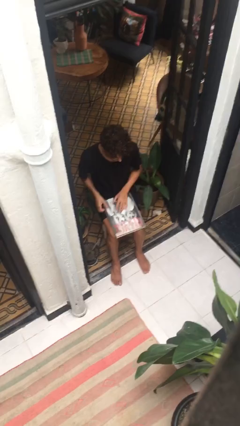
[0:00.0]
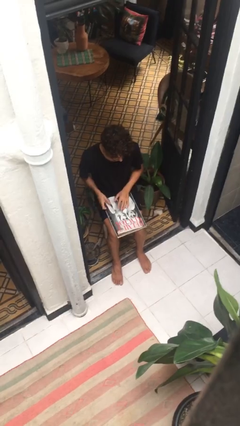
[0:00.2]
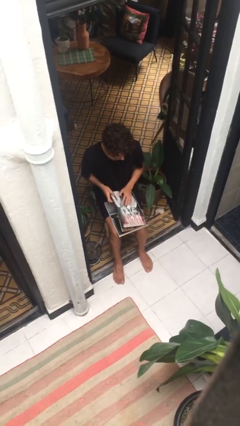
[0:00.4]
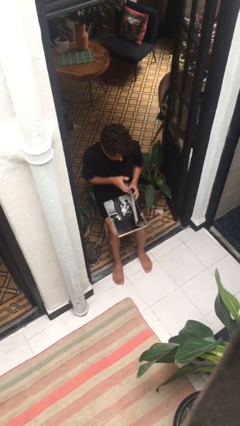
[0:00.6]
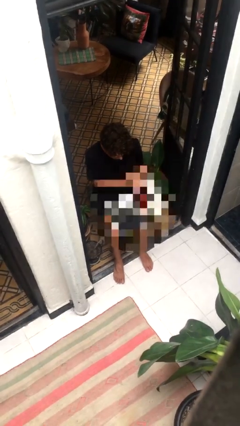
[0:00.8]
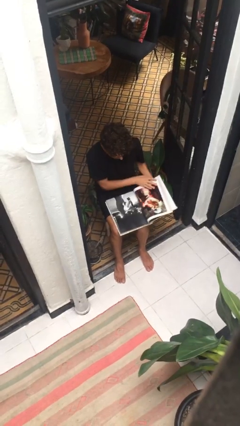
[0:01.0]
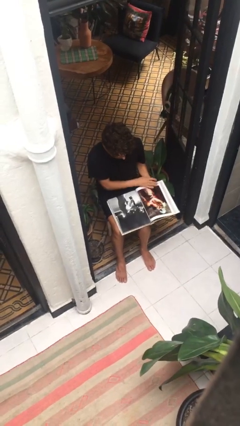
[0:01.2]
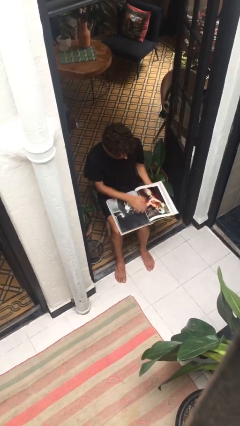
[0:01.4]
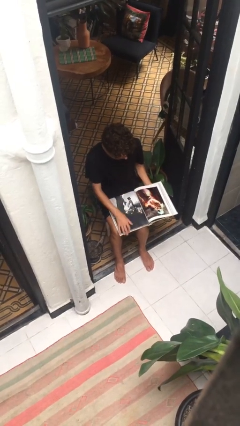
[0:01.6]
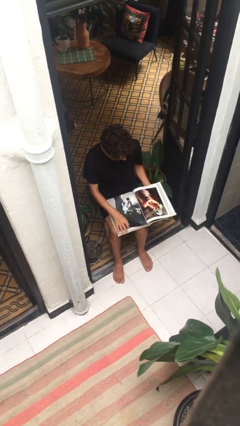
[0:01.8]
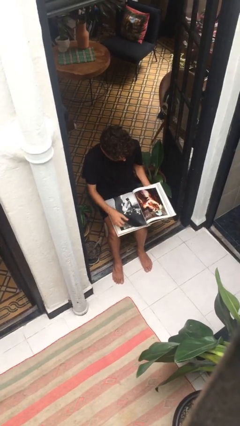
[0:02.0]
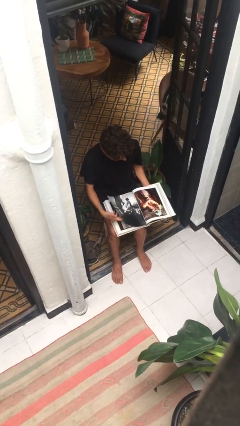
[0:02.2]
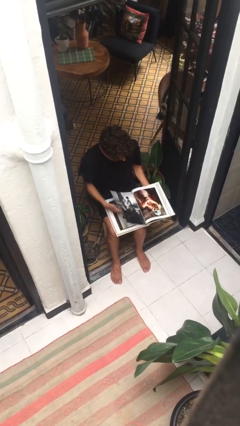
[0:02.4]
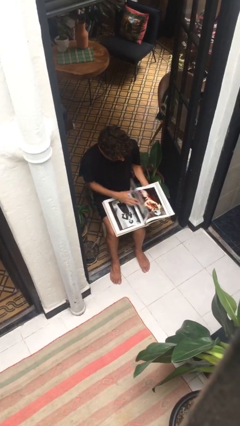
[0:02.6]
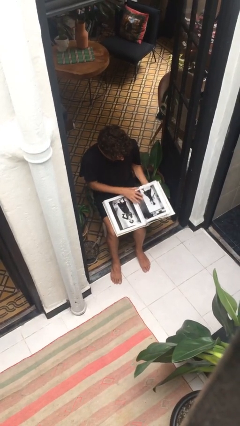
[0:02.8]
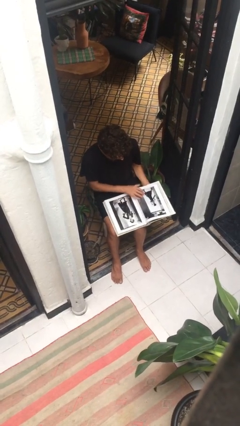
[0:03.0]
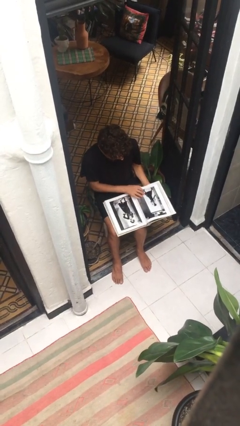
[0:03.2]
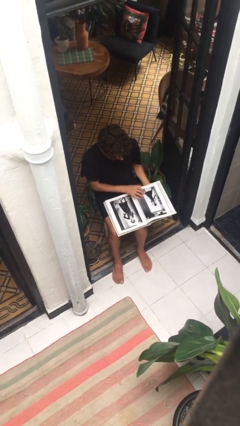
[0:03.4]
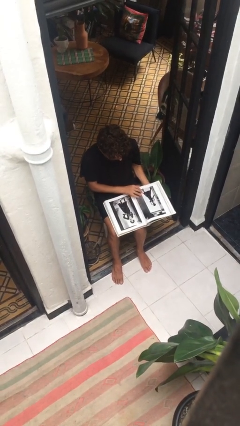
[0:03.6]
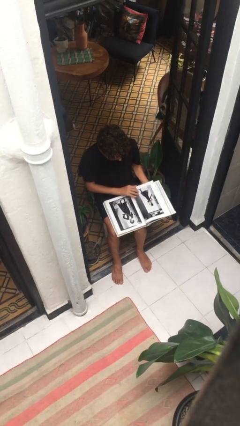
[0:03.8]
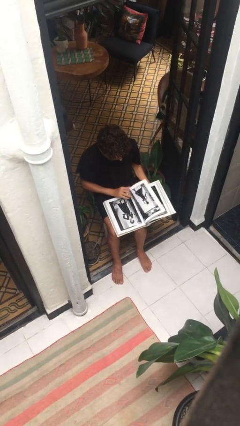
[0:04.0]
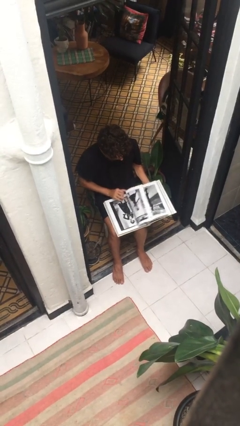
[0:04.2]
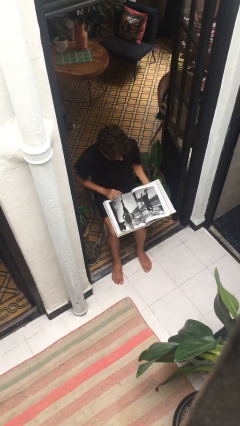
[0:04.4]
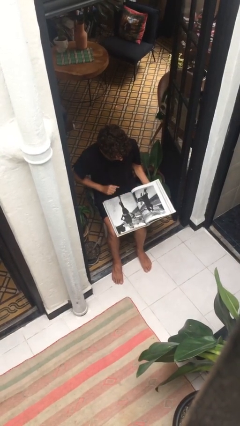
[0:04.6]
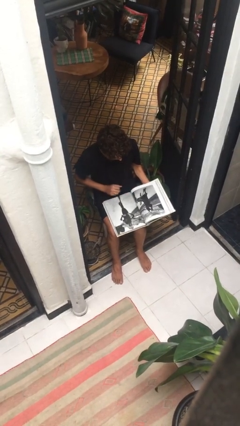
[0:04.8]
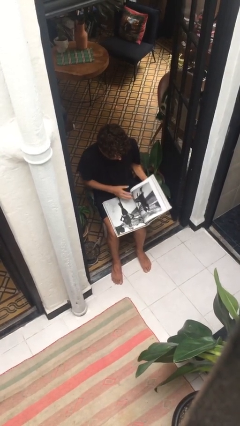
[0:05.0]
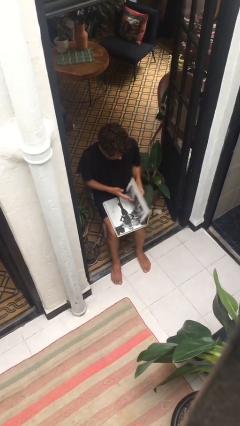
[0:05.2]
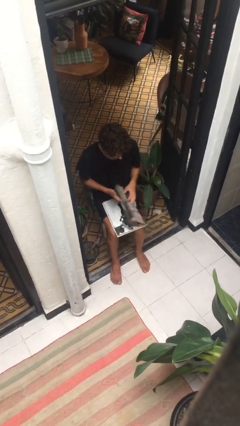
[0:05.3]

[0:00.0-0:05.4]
person reads document

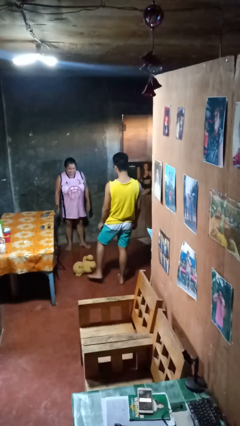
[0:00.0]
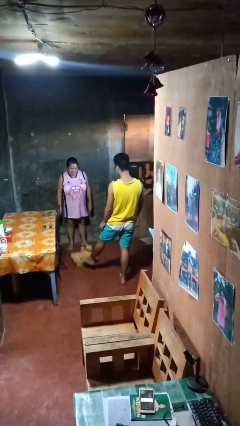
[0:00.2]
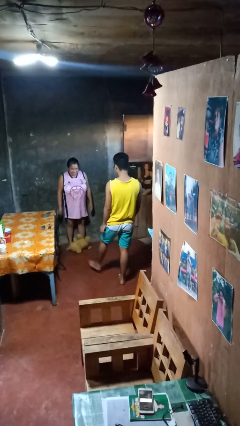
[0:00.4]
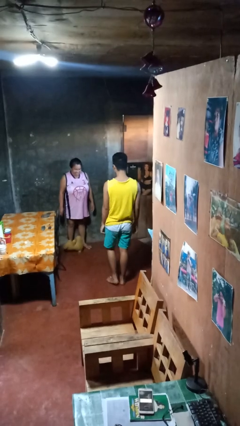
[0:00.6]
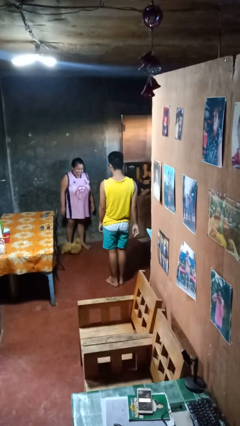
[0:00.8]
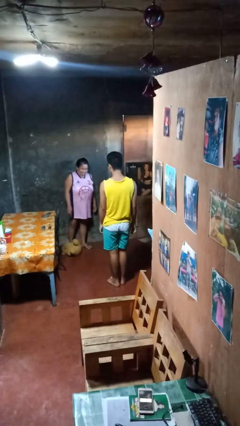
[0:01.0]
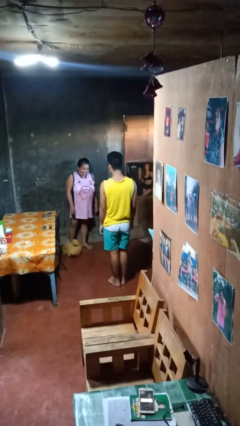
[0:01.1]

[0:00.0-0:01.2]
person kicks object to person

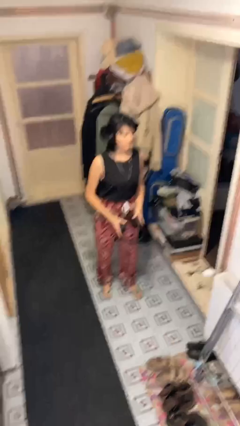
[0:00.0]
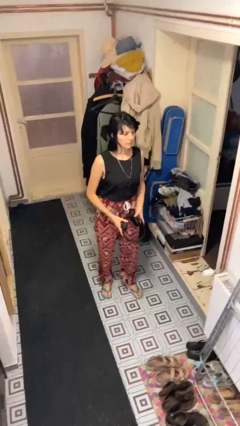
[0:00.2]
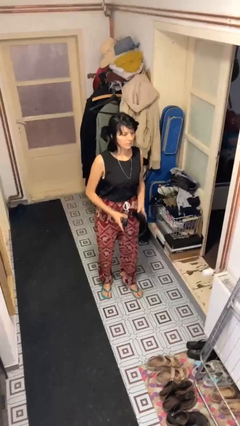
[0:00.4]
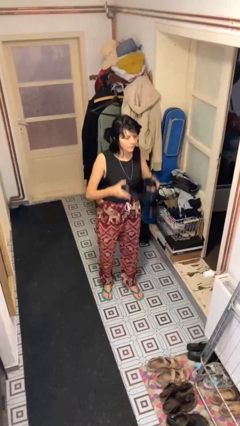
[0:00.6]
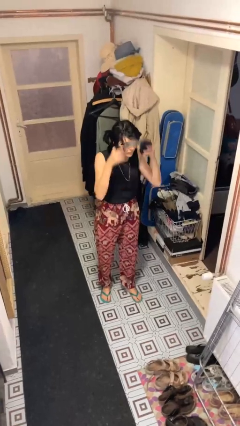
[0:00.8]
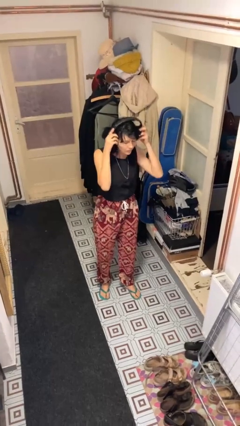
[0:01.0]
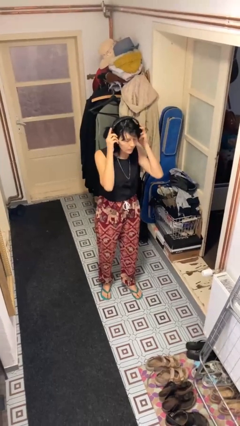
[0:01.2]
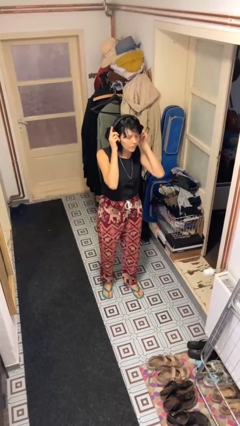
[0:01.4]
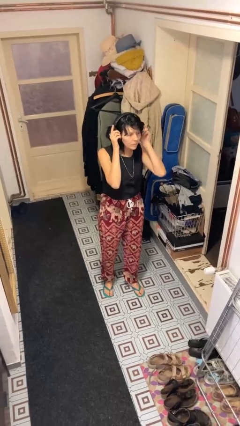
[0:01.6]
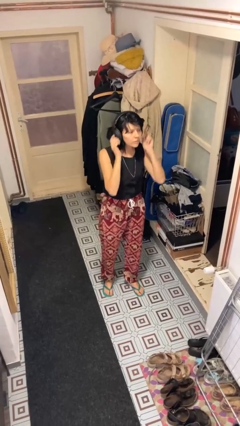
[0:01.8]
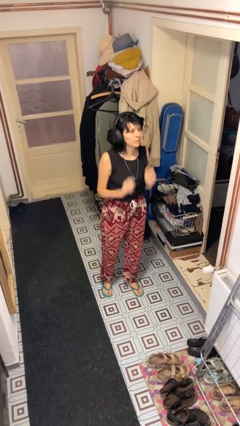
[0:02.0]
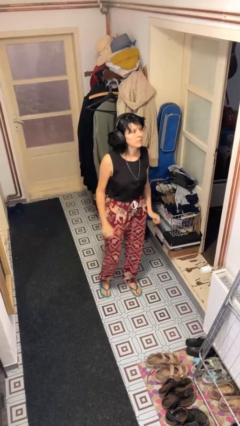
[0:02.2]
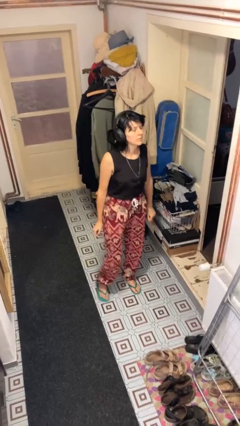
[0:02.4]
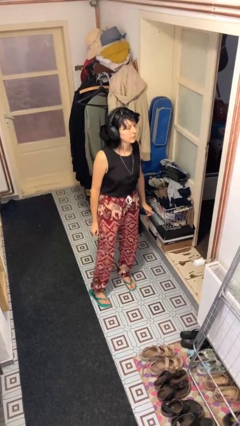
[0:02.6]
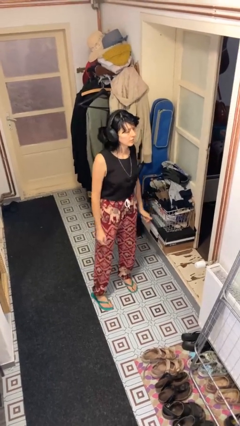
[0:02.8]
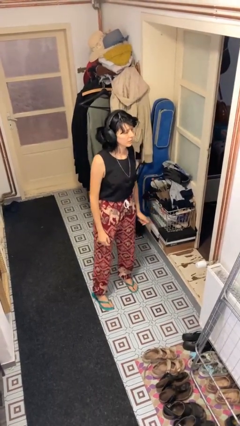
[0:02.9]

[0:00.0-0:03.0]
person puts on headphones

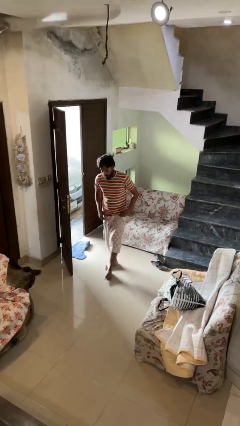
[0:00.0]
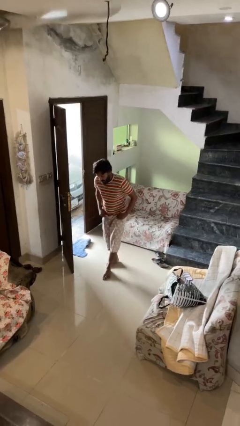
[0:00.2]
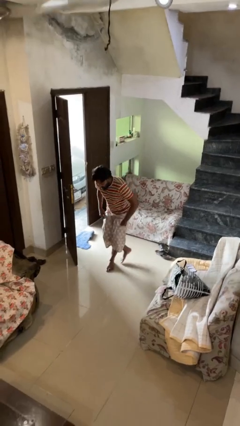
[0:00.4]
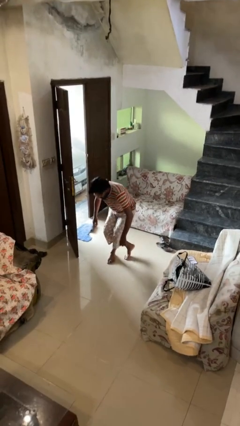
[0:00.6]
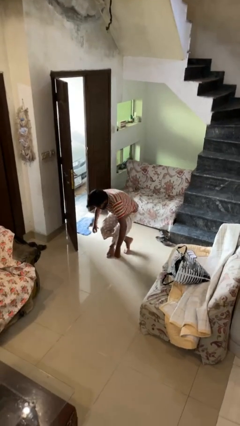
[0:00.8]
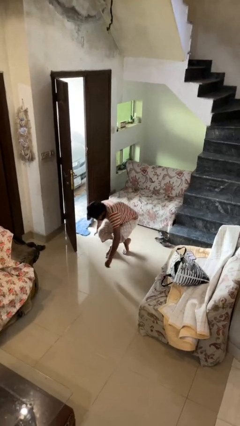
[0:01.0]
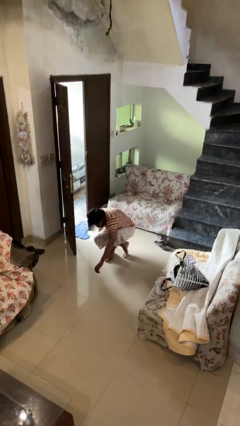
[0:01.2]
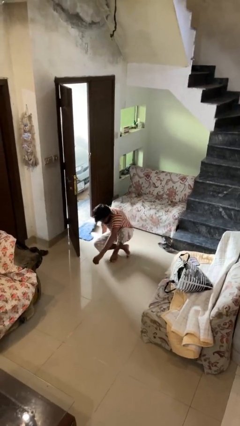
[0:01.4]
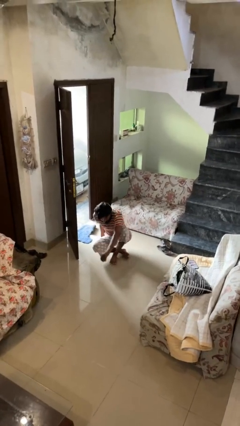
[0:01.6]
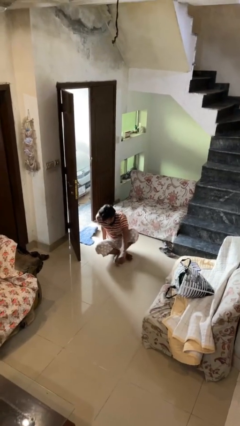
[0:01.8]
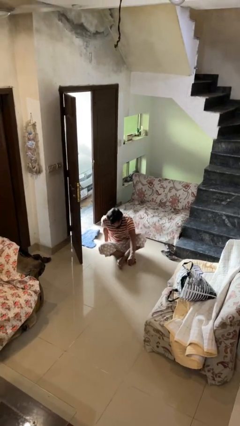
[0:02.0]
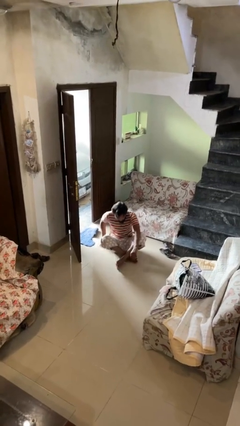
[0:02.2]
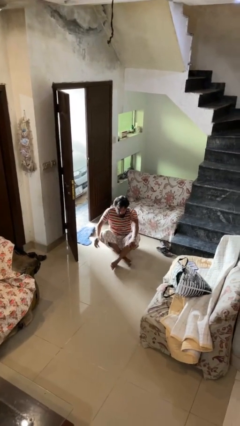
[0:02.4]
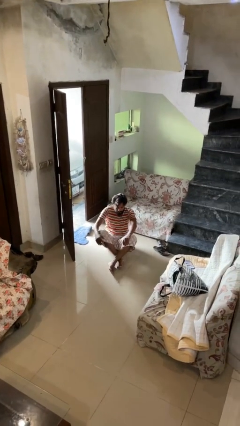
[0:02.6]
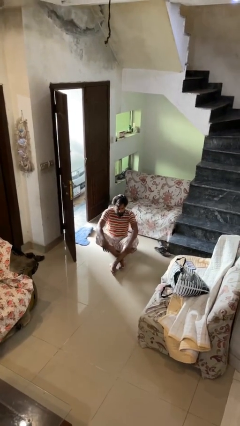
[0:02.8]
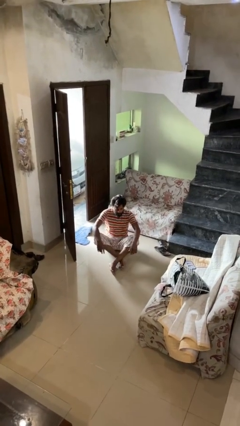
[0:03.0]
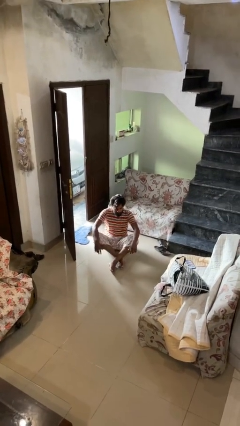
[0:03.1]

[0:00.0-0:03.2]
person sits crisscross

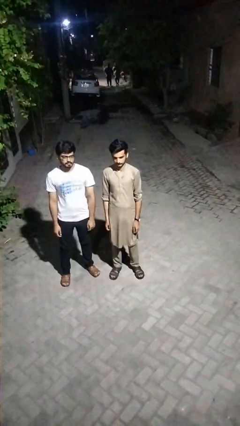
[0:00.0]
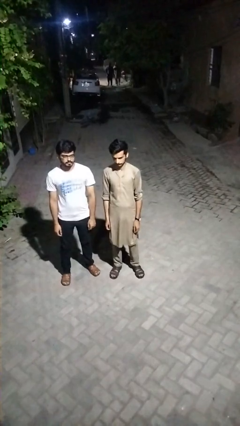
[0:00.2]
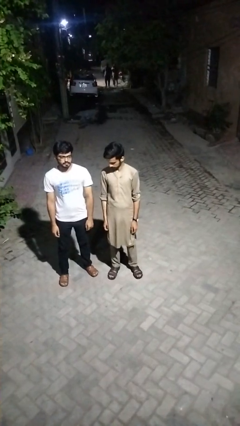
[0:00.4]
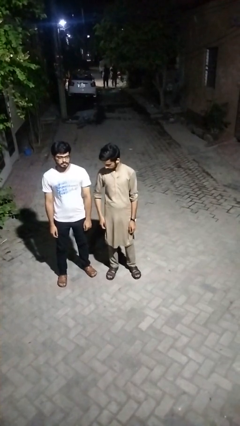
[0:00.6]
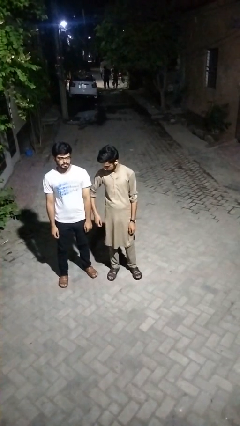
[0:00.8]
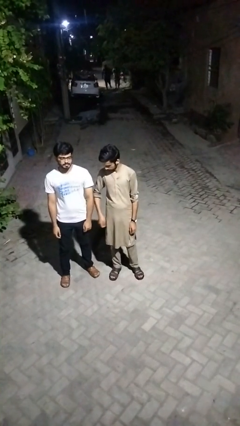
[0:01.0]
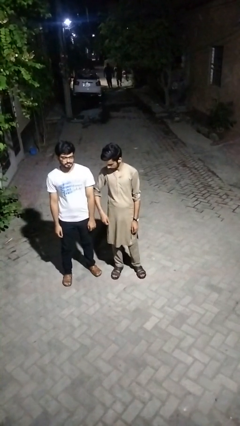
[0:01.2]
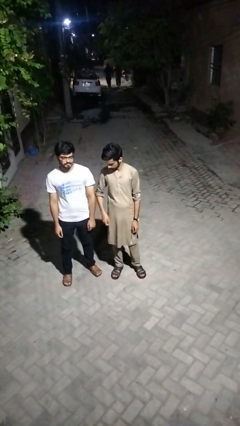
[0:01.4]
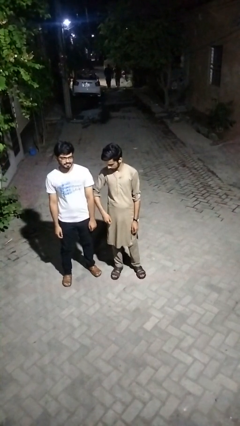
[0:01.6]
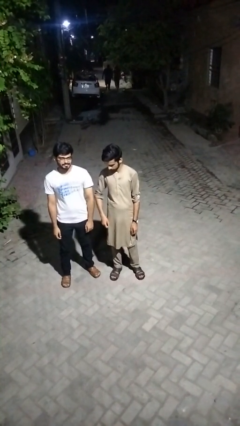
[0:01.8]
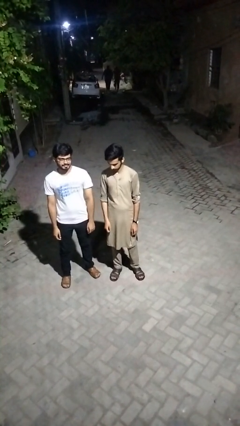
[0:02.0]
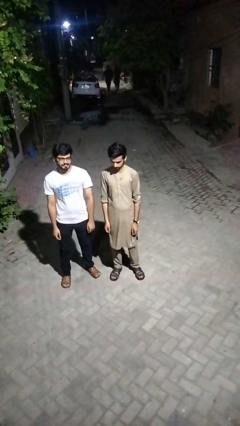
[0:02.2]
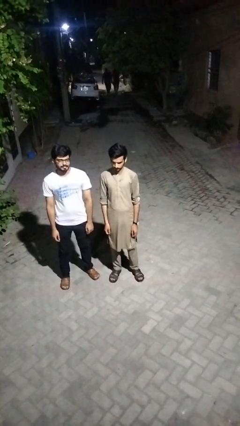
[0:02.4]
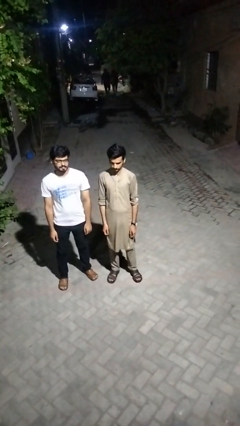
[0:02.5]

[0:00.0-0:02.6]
person nudges person with elbow

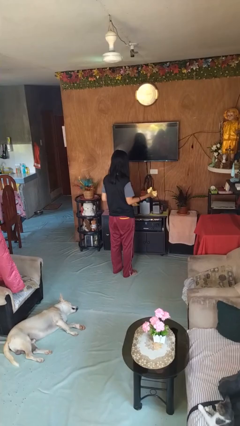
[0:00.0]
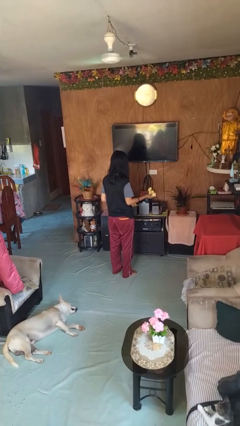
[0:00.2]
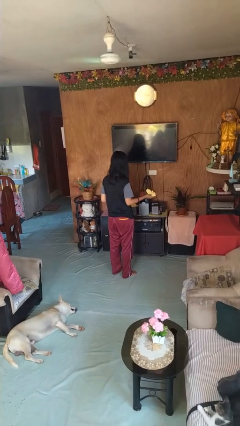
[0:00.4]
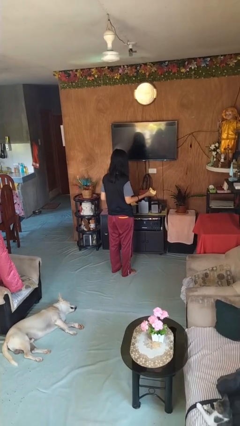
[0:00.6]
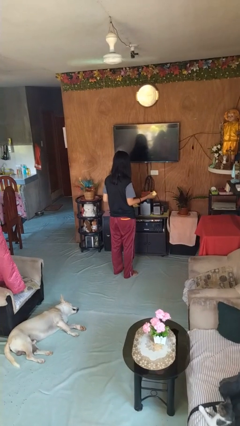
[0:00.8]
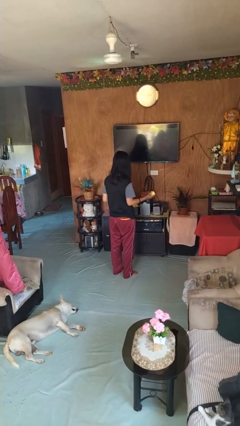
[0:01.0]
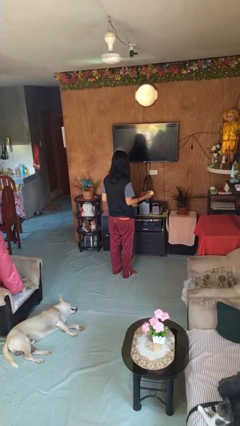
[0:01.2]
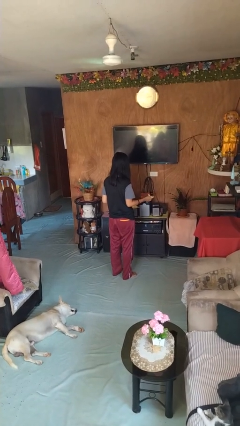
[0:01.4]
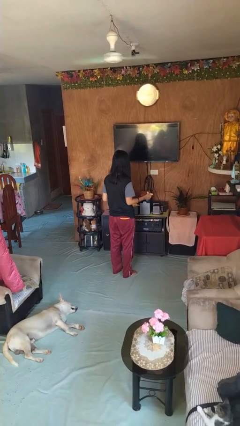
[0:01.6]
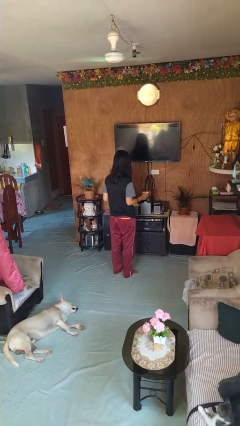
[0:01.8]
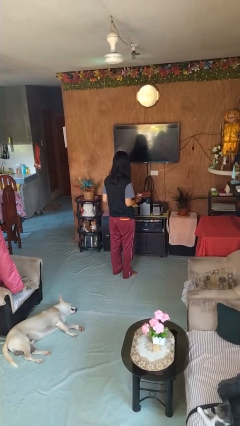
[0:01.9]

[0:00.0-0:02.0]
person crumples paper
